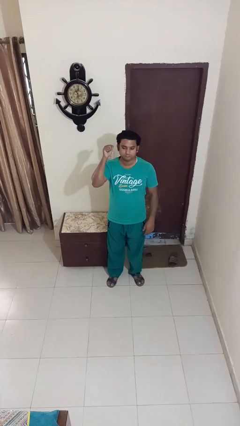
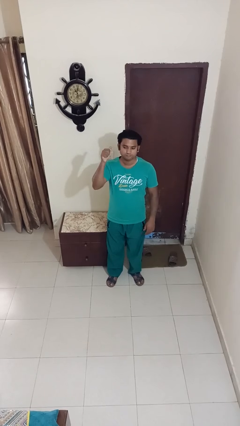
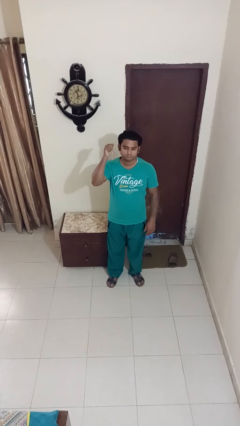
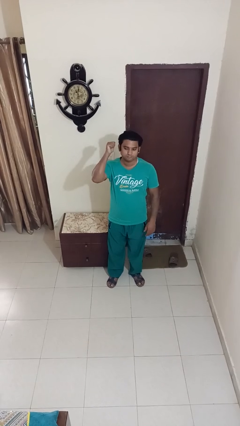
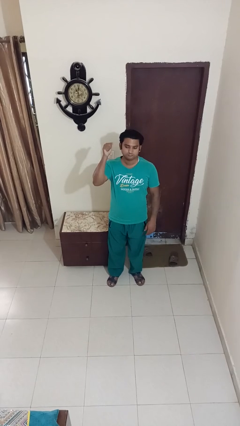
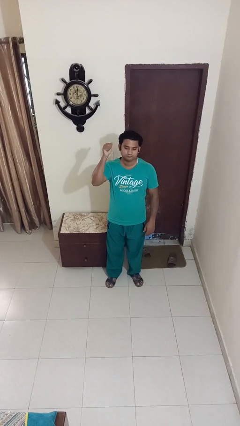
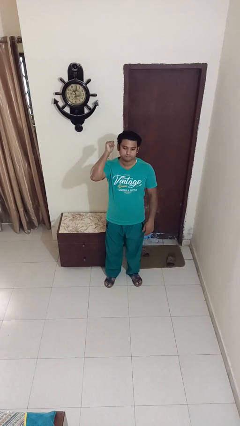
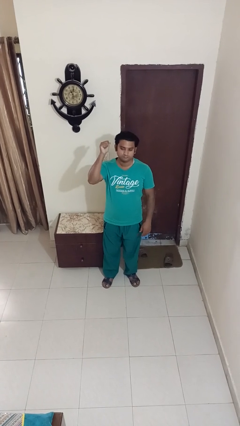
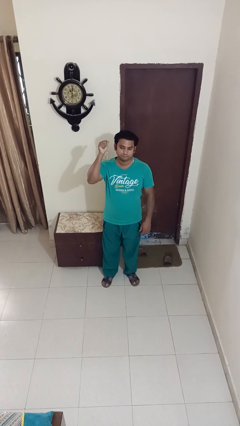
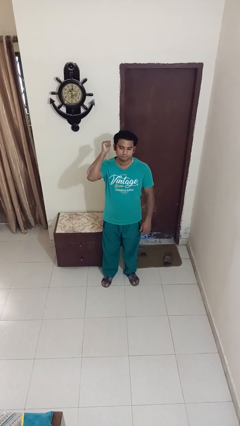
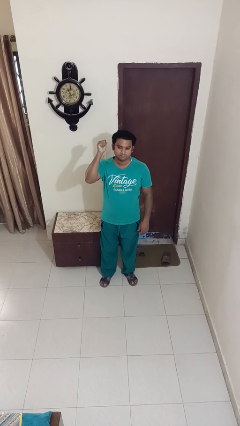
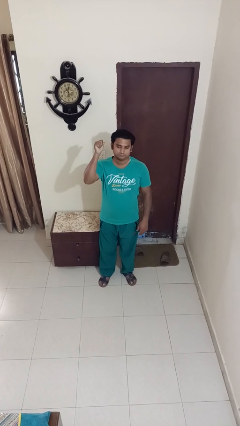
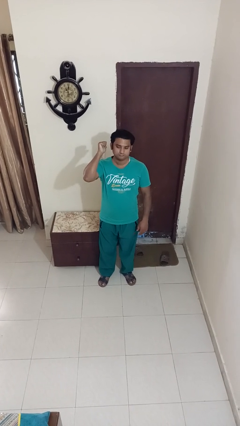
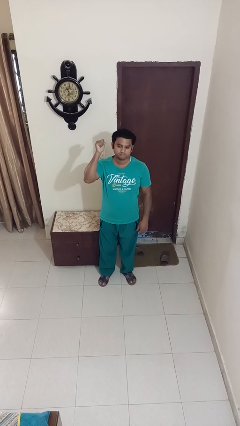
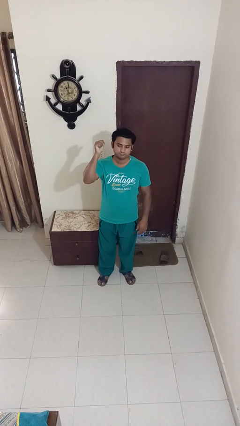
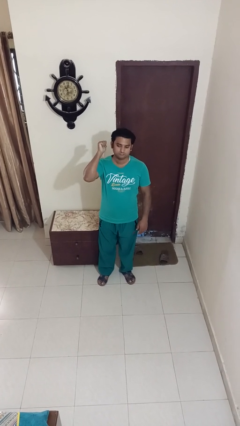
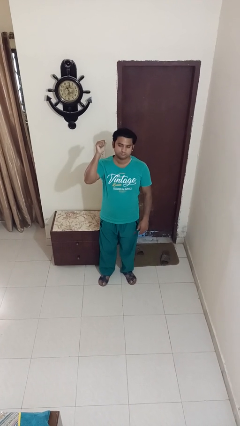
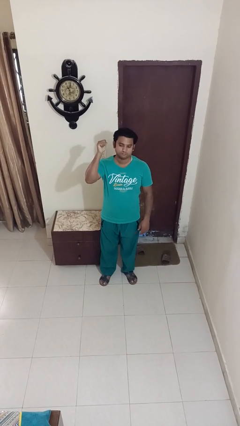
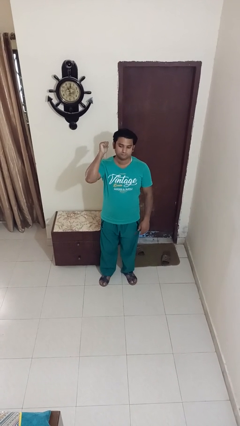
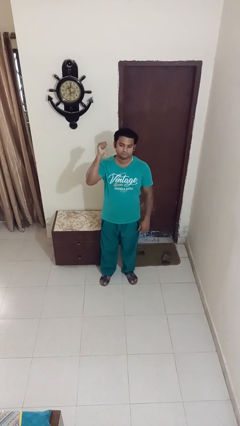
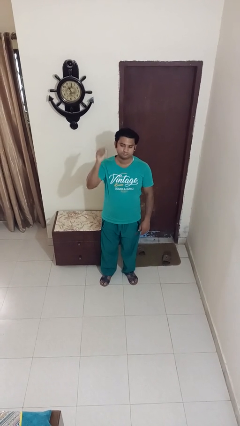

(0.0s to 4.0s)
person gestures behind me

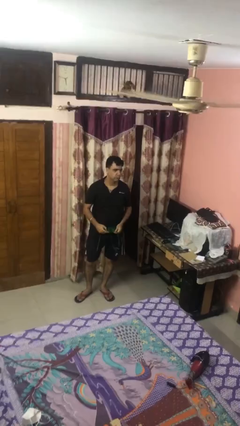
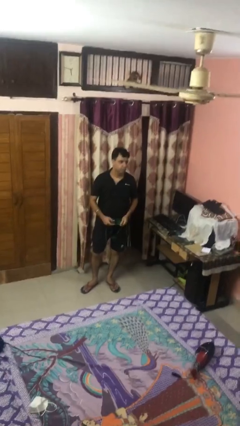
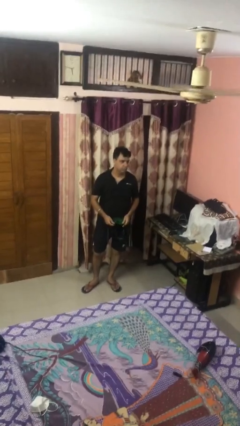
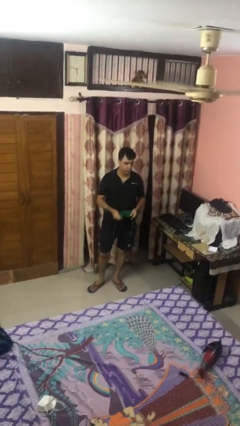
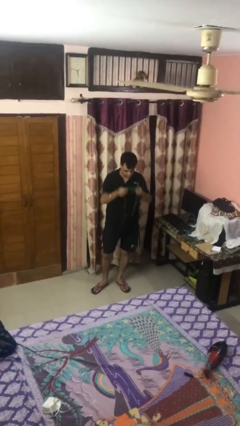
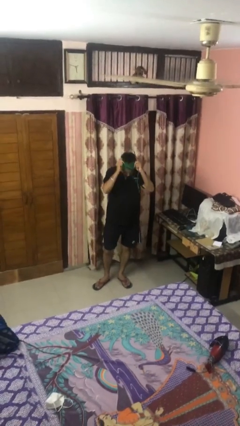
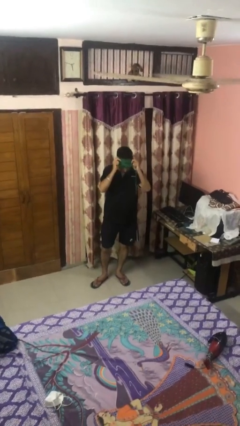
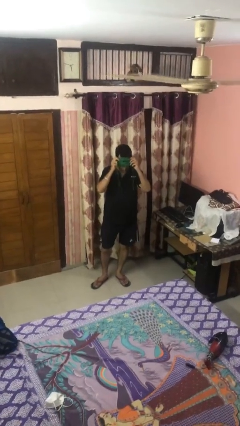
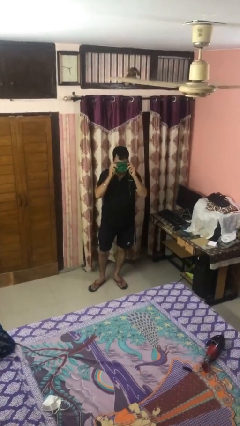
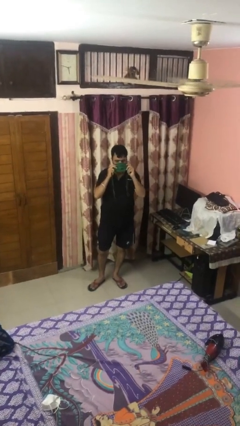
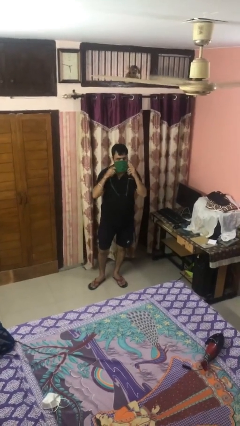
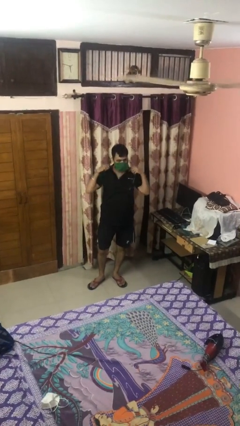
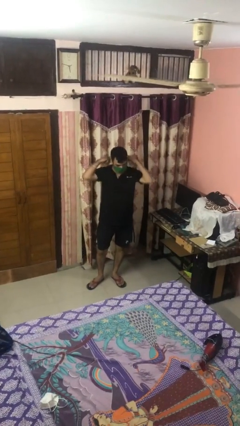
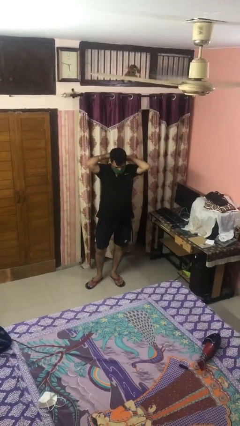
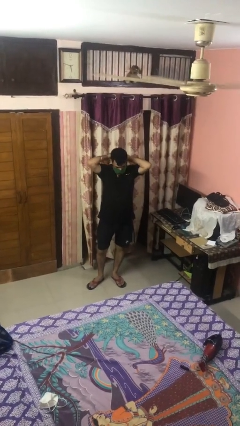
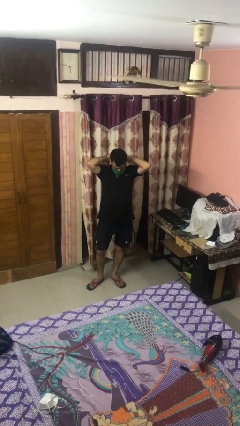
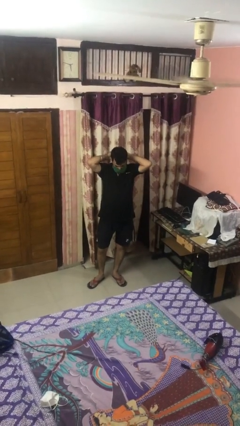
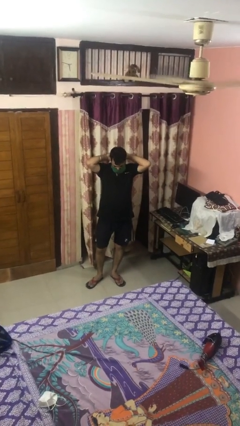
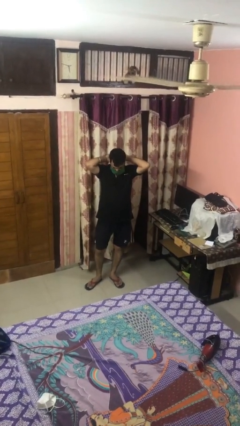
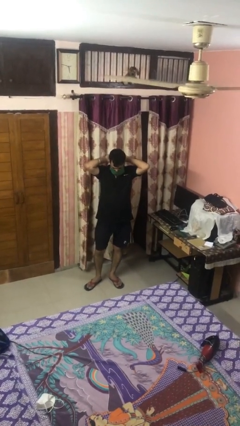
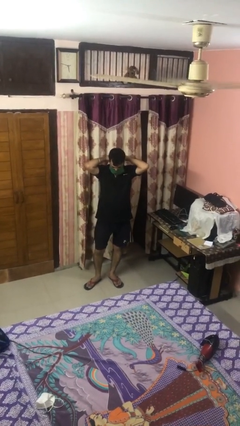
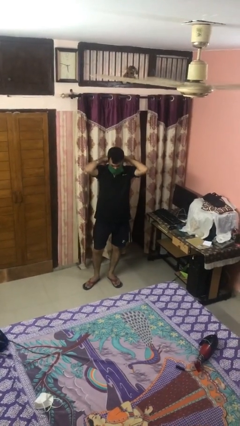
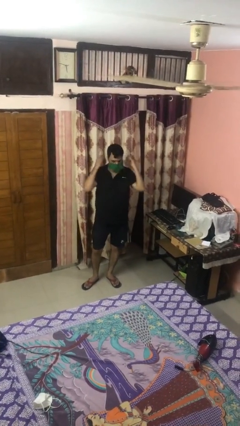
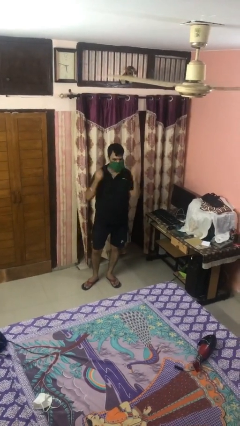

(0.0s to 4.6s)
person puts on facemask

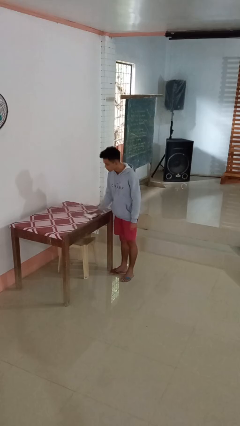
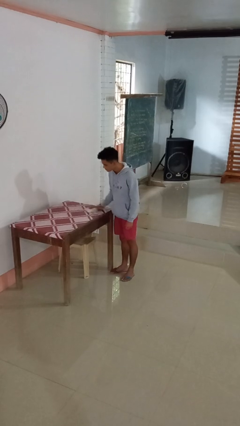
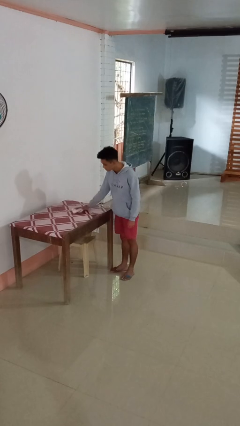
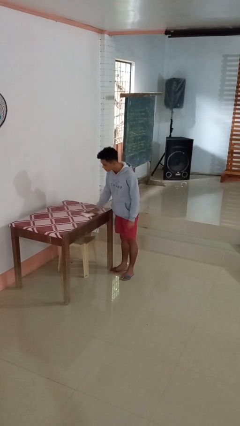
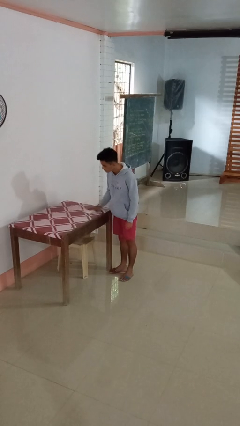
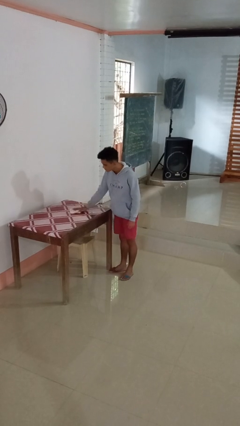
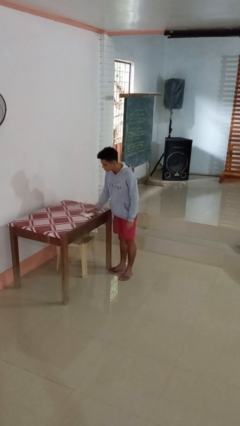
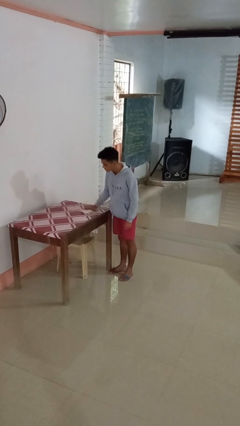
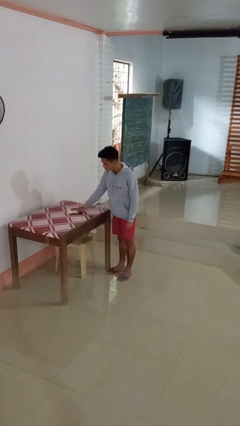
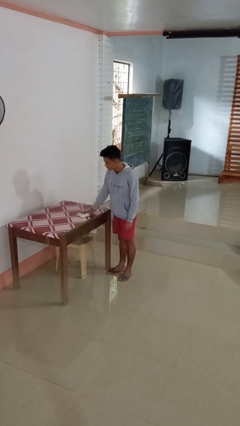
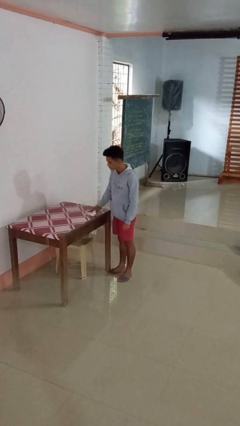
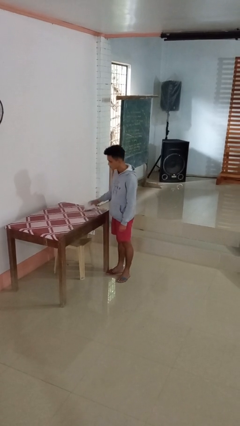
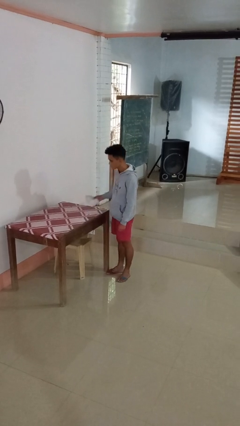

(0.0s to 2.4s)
person cleans table with rag

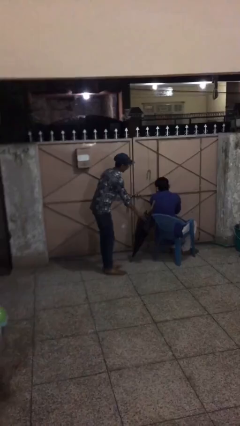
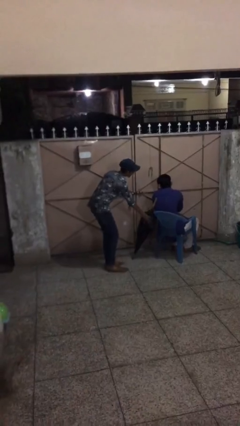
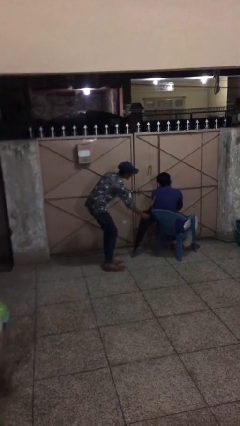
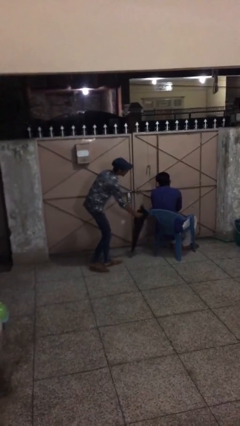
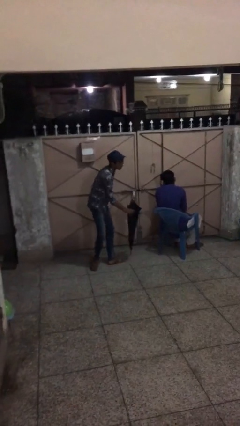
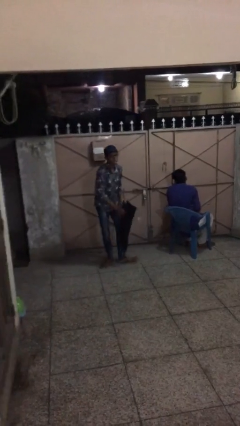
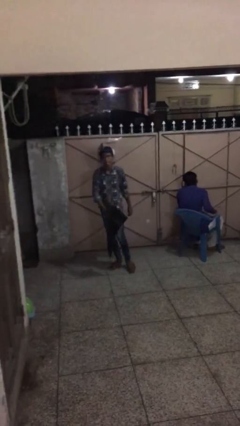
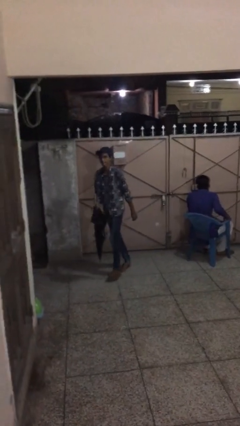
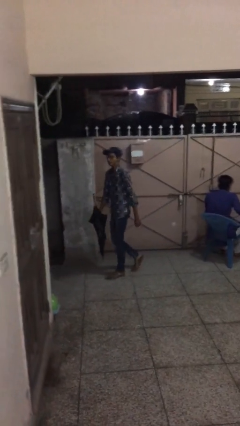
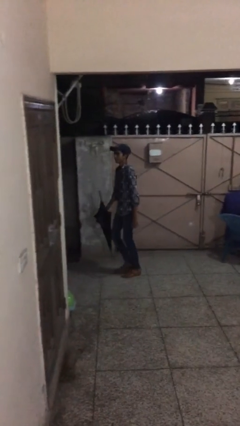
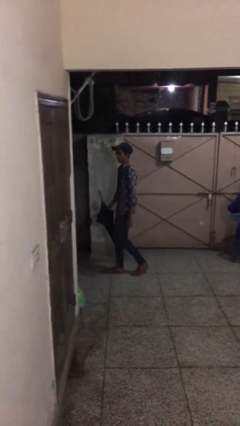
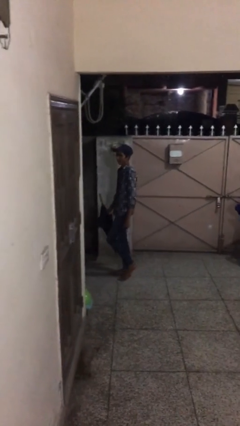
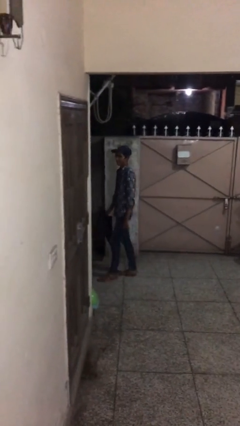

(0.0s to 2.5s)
person steals object from person

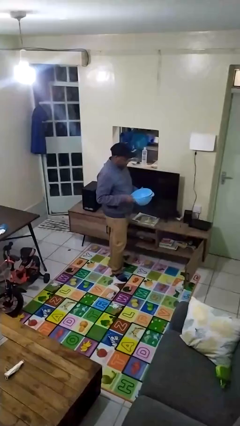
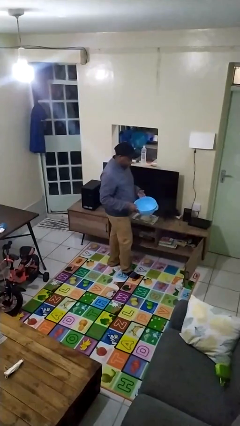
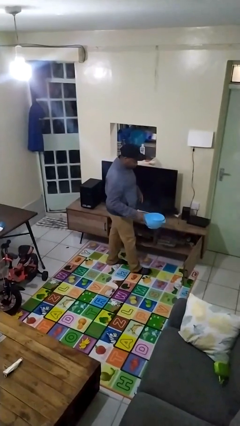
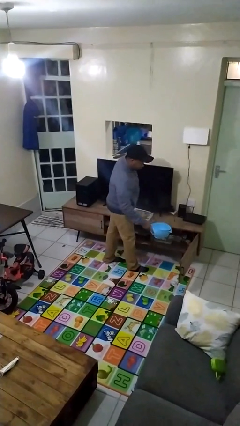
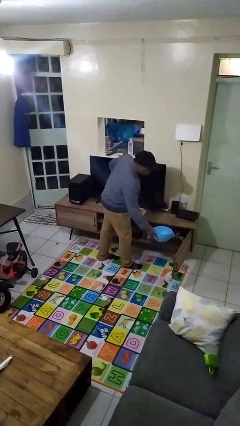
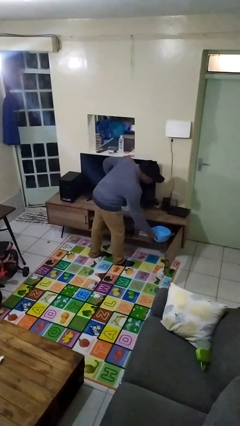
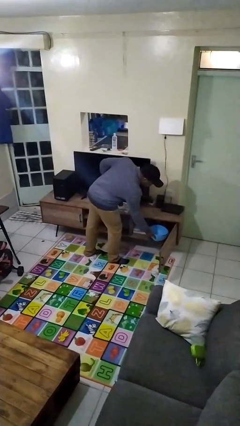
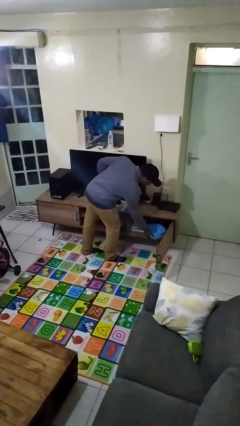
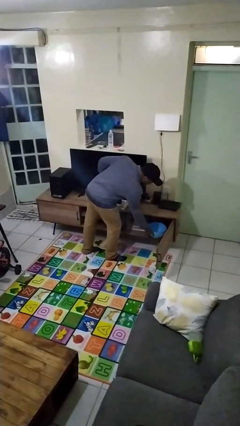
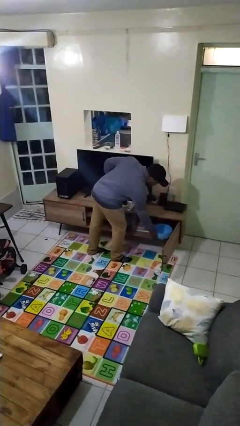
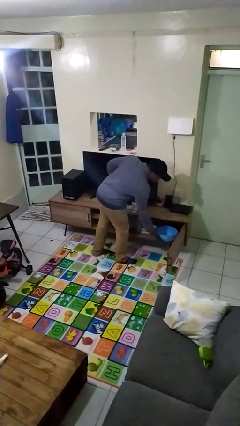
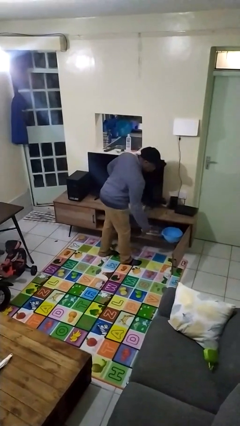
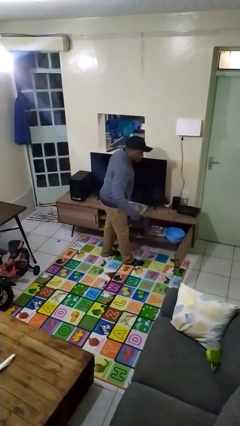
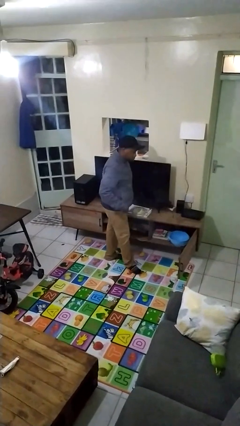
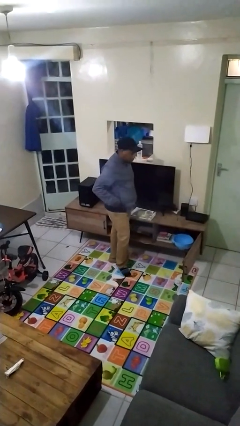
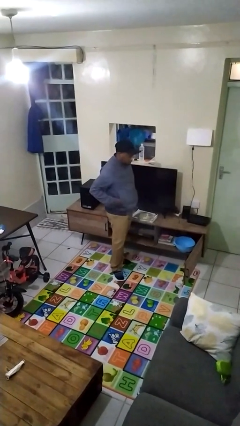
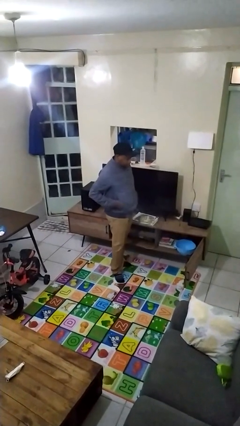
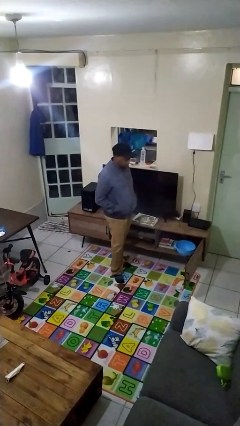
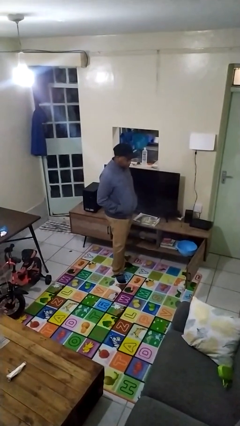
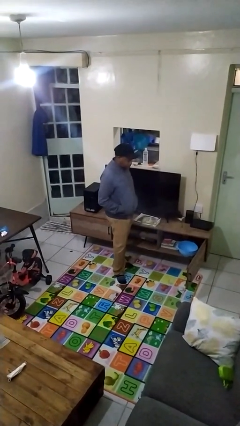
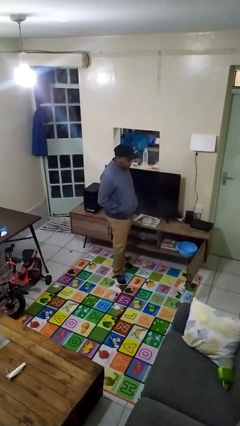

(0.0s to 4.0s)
person puts down object into cabinet
